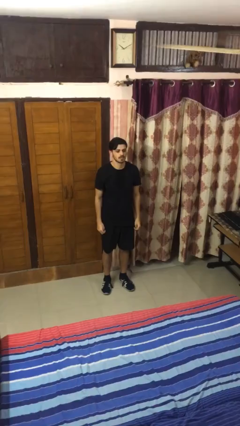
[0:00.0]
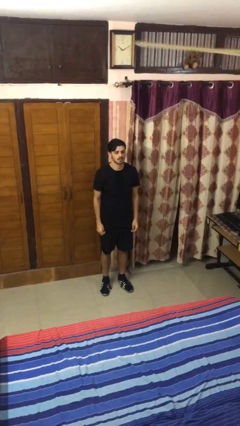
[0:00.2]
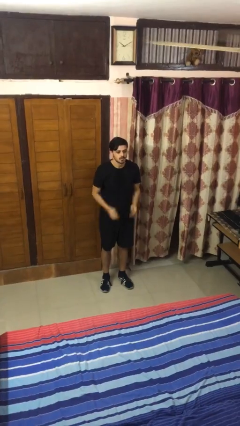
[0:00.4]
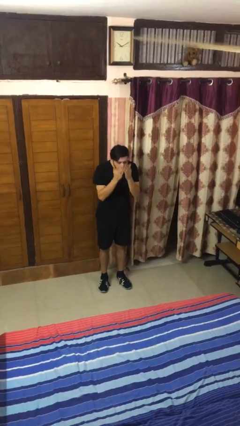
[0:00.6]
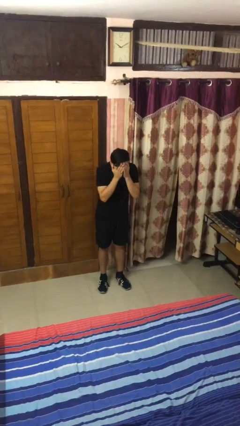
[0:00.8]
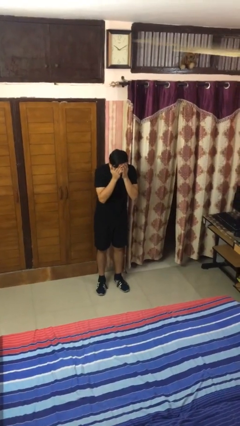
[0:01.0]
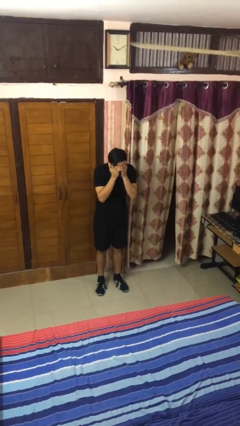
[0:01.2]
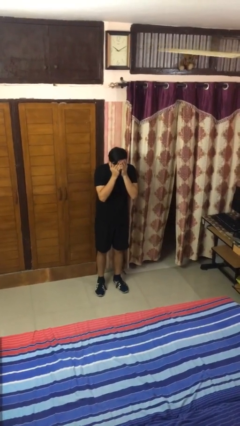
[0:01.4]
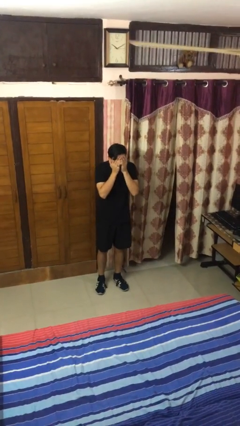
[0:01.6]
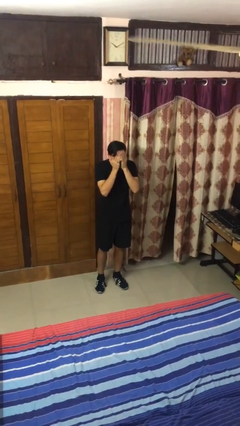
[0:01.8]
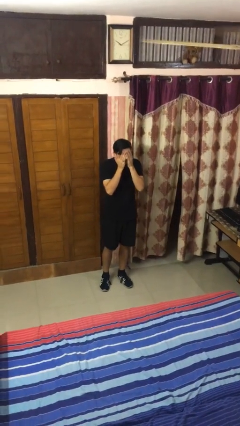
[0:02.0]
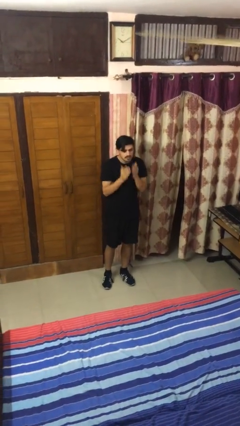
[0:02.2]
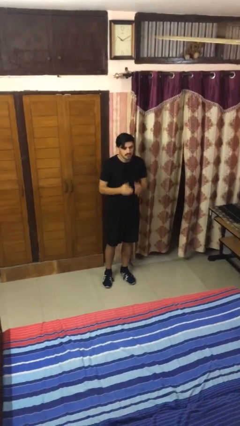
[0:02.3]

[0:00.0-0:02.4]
person covers face with hands

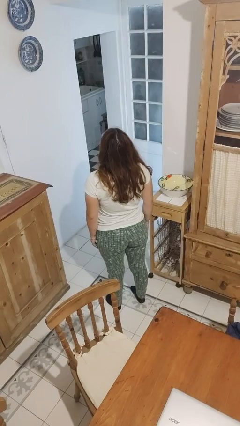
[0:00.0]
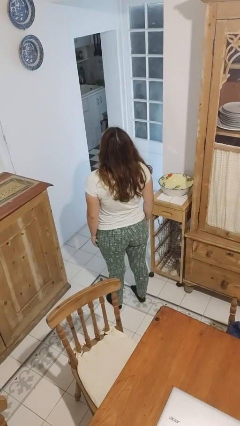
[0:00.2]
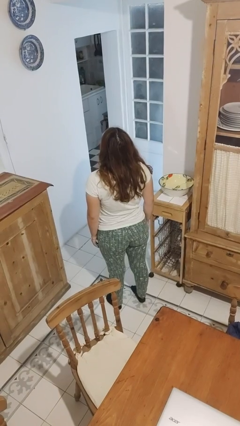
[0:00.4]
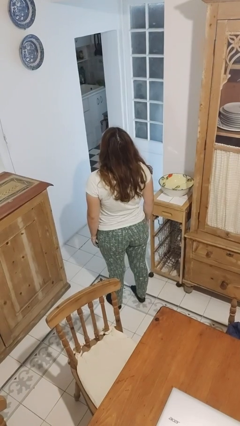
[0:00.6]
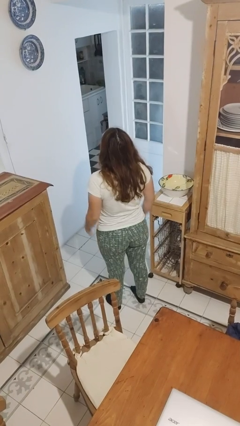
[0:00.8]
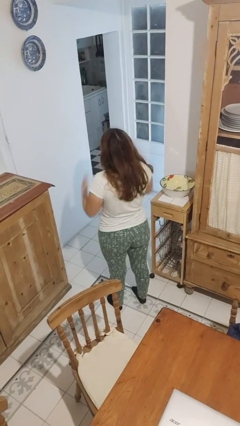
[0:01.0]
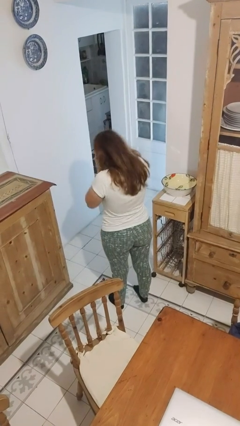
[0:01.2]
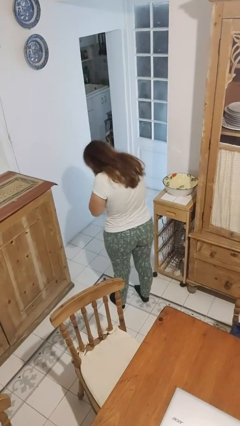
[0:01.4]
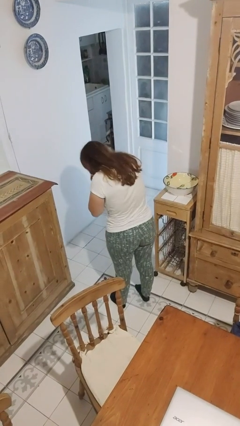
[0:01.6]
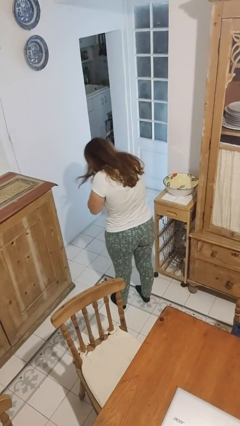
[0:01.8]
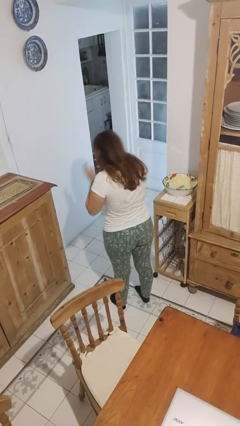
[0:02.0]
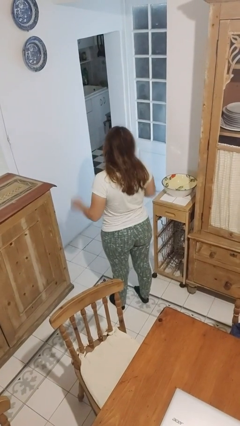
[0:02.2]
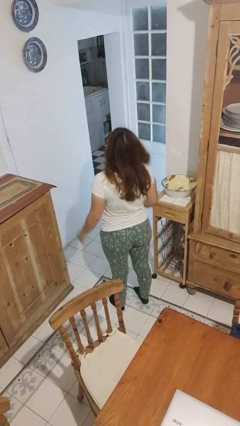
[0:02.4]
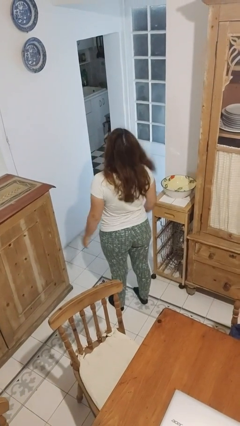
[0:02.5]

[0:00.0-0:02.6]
person sneezes into hand

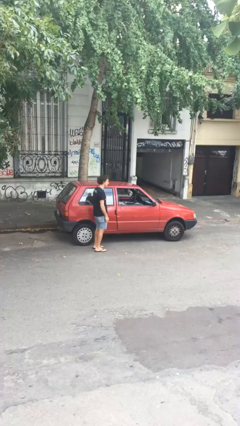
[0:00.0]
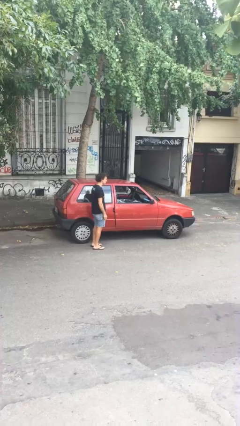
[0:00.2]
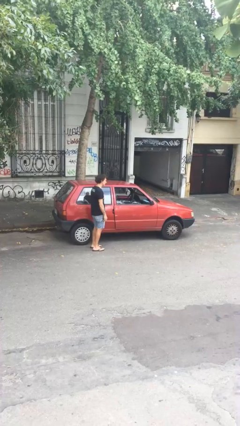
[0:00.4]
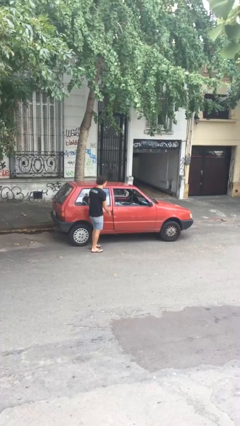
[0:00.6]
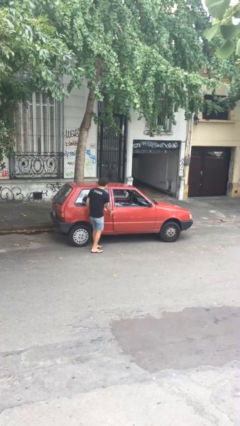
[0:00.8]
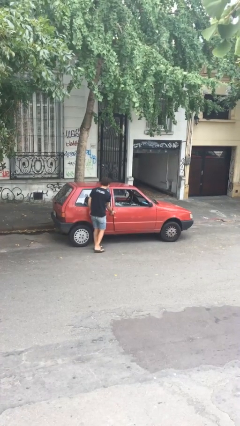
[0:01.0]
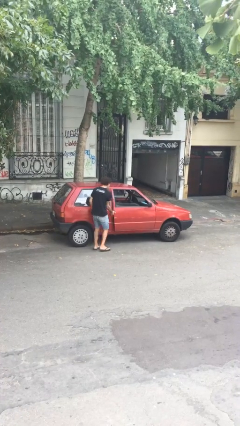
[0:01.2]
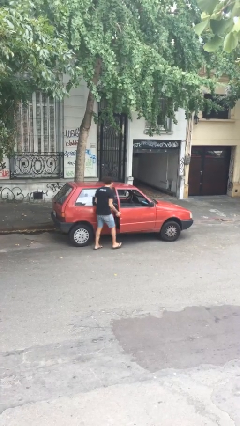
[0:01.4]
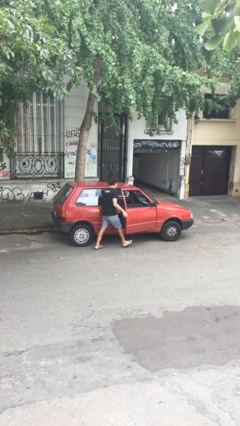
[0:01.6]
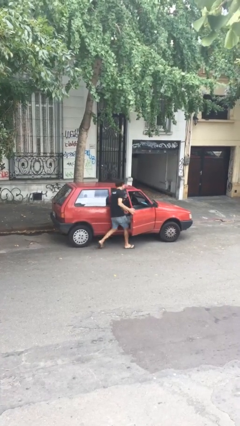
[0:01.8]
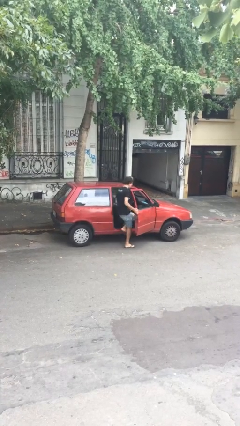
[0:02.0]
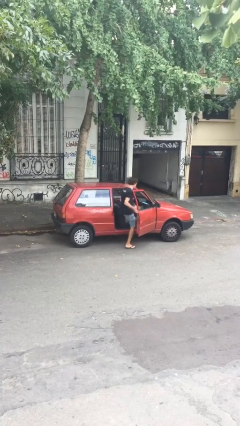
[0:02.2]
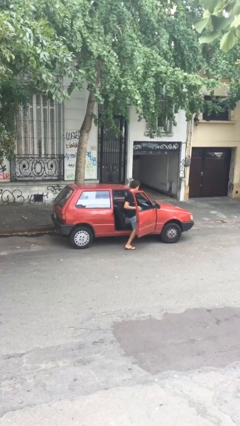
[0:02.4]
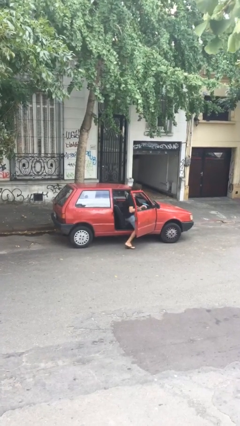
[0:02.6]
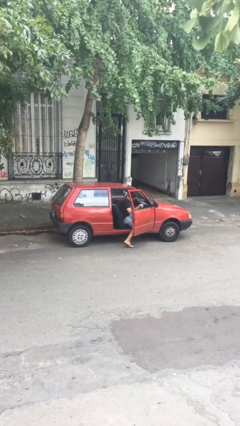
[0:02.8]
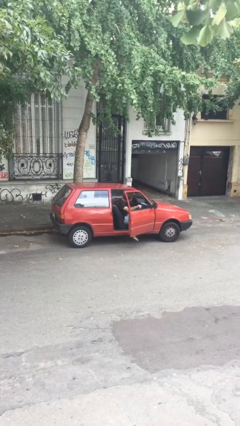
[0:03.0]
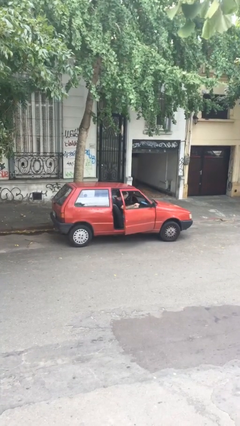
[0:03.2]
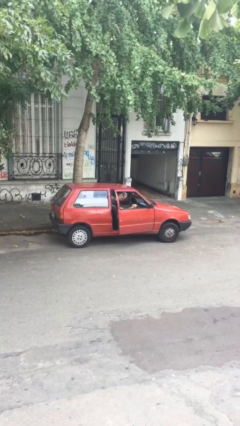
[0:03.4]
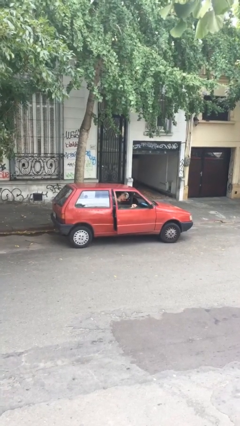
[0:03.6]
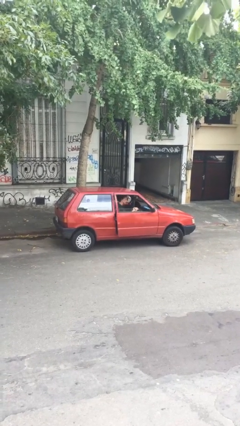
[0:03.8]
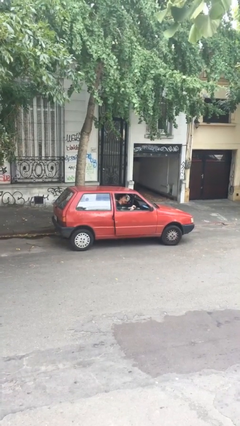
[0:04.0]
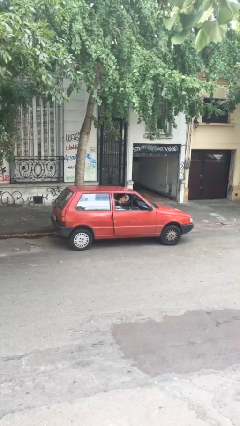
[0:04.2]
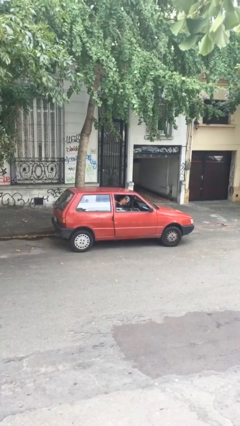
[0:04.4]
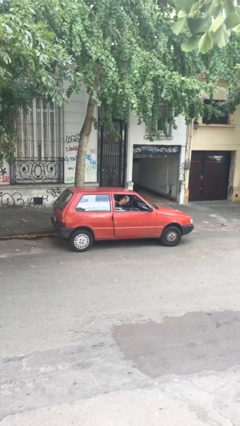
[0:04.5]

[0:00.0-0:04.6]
car picks up person

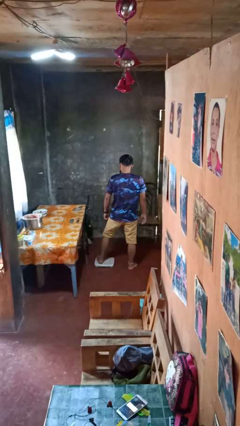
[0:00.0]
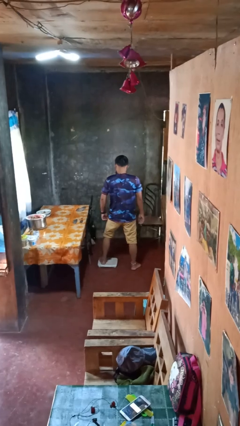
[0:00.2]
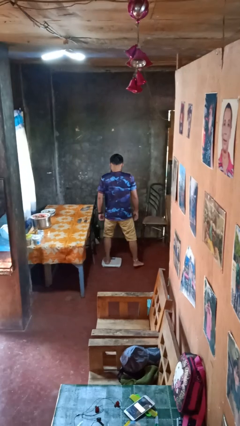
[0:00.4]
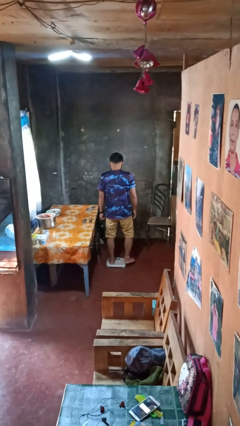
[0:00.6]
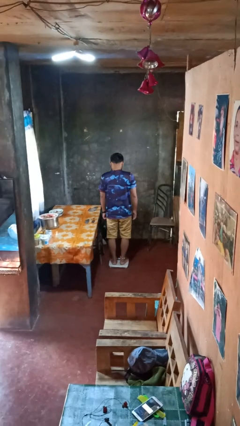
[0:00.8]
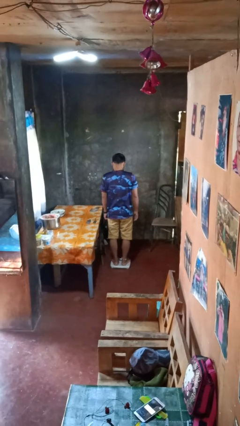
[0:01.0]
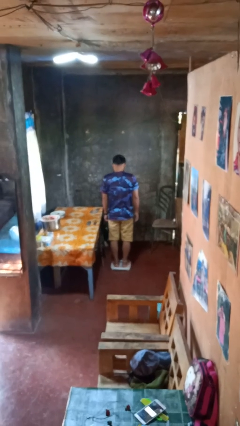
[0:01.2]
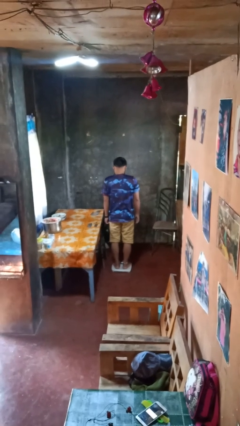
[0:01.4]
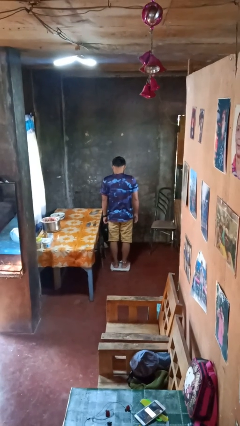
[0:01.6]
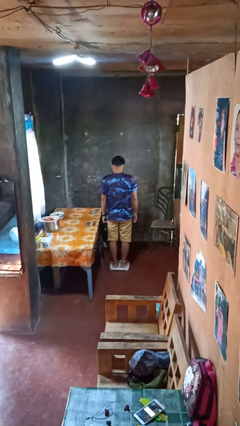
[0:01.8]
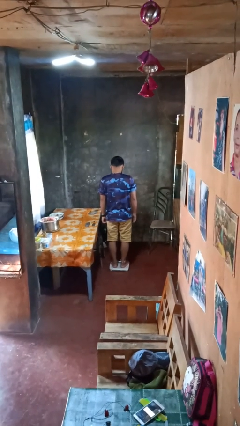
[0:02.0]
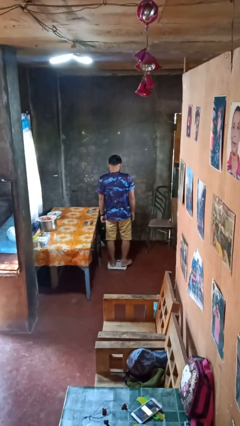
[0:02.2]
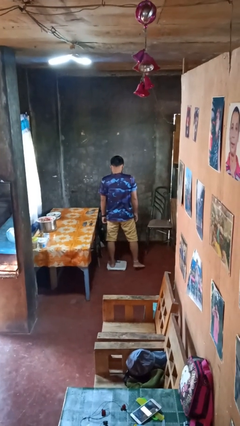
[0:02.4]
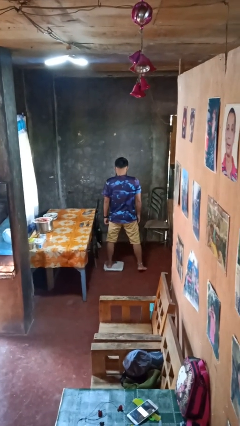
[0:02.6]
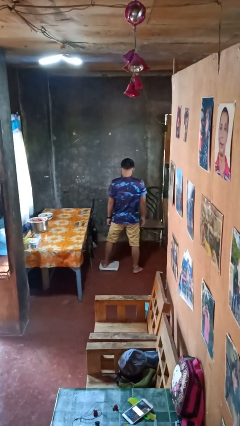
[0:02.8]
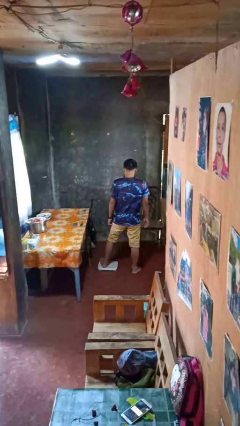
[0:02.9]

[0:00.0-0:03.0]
person uses bodyweight scale

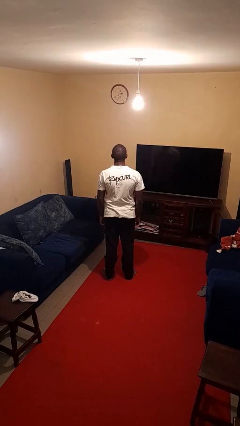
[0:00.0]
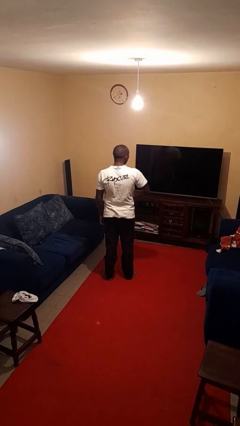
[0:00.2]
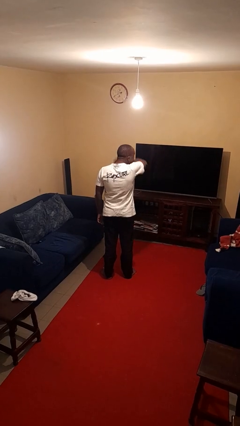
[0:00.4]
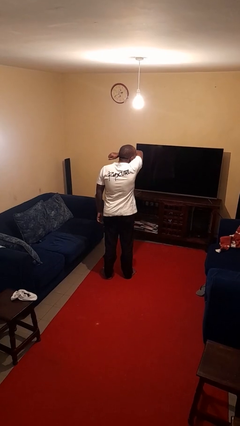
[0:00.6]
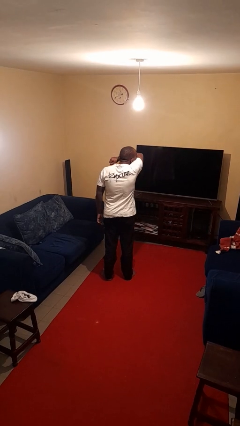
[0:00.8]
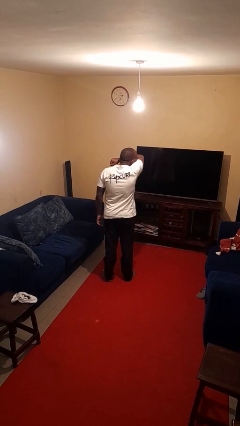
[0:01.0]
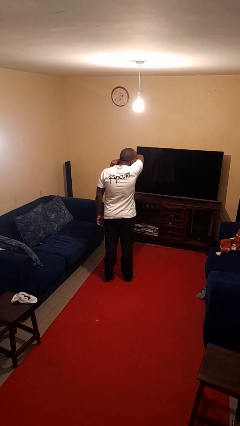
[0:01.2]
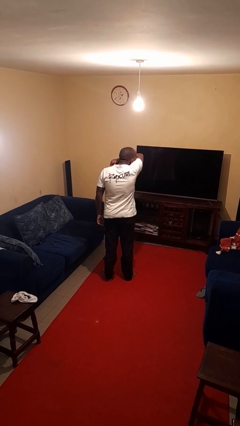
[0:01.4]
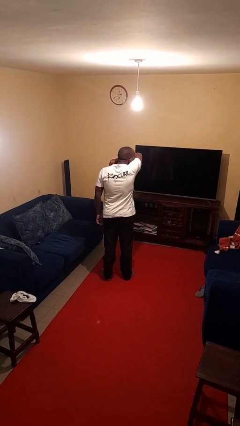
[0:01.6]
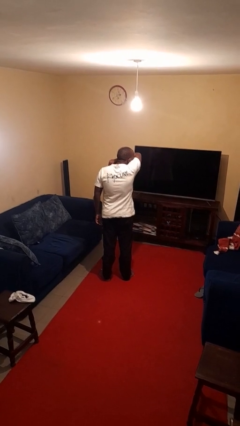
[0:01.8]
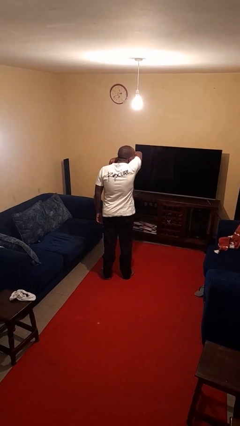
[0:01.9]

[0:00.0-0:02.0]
person sneezes into arm

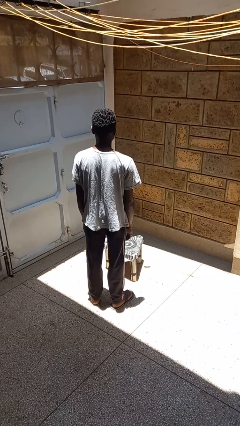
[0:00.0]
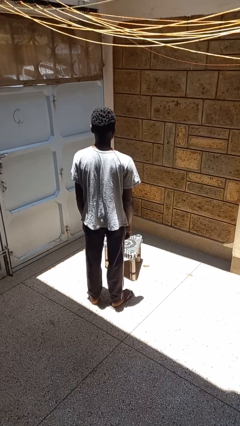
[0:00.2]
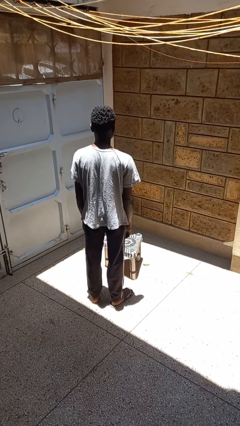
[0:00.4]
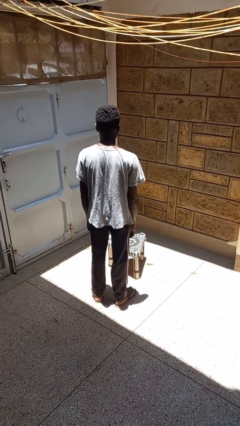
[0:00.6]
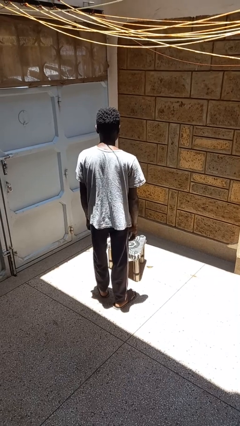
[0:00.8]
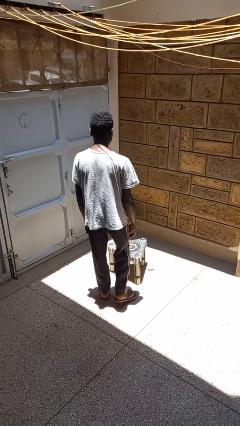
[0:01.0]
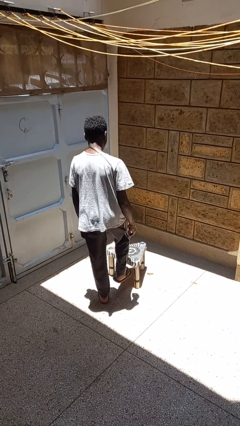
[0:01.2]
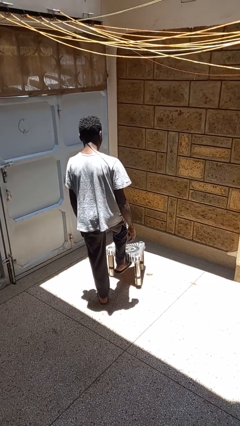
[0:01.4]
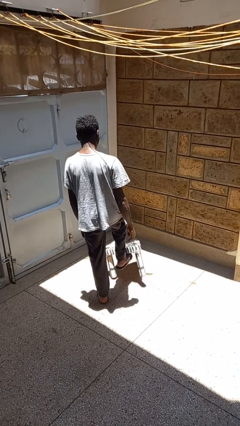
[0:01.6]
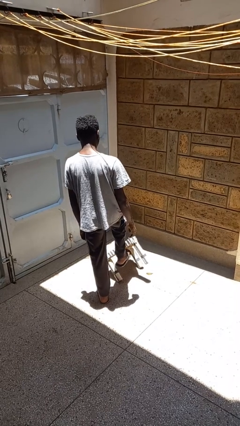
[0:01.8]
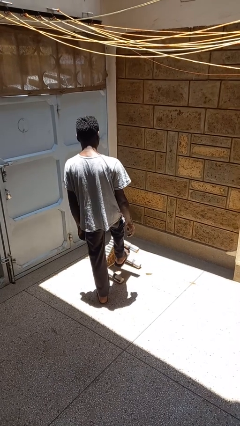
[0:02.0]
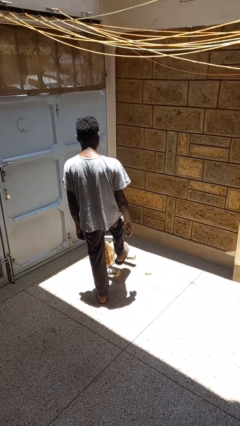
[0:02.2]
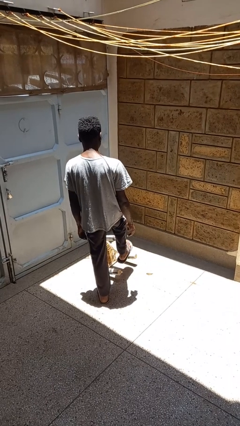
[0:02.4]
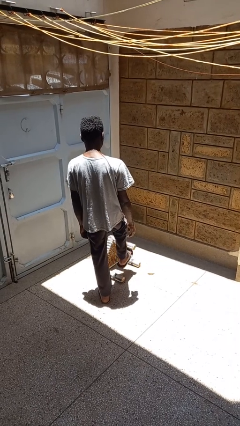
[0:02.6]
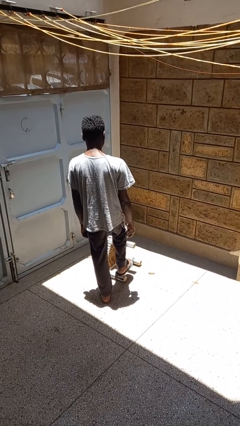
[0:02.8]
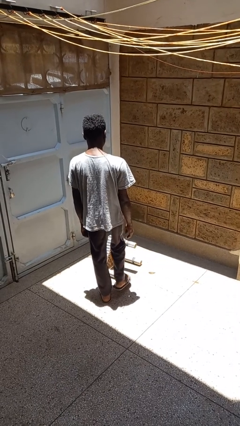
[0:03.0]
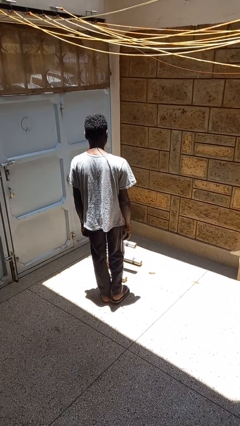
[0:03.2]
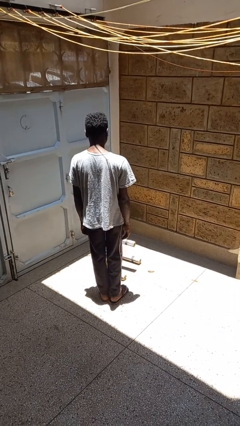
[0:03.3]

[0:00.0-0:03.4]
person knocks over furniture
